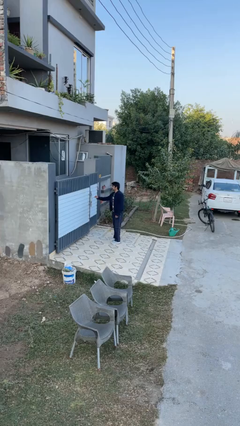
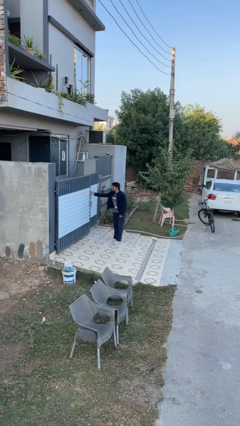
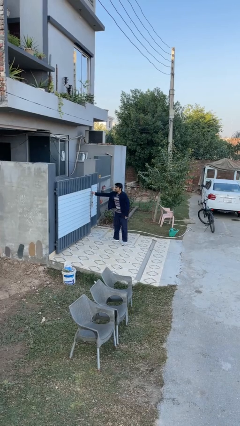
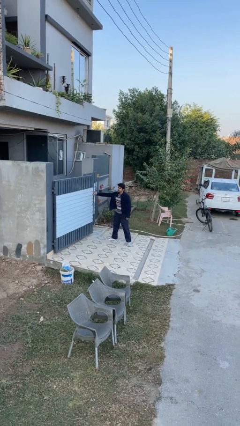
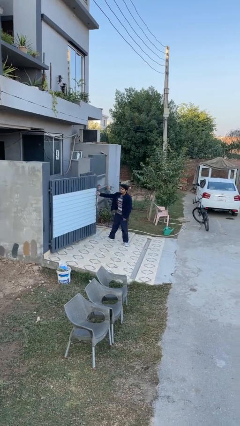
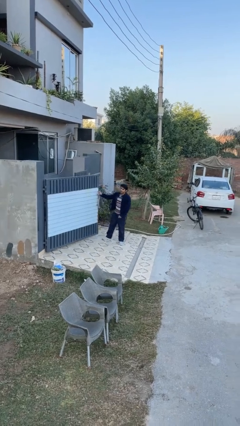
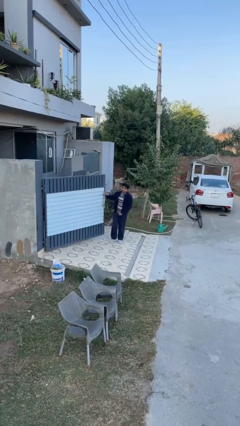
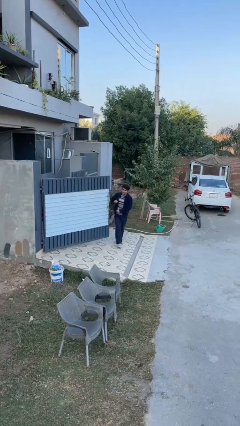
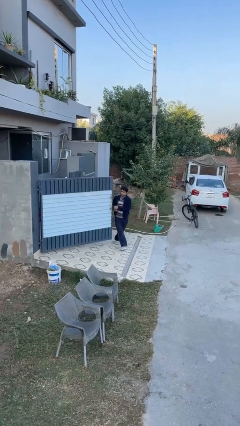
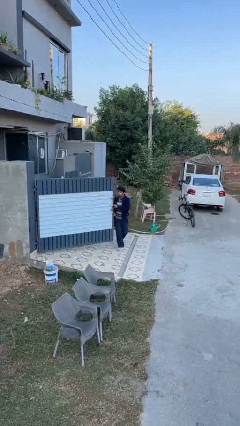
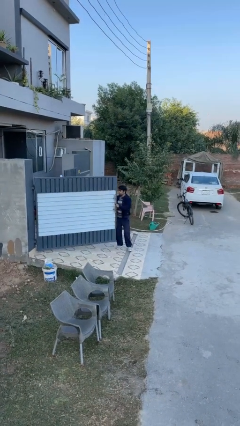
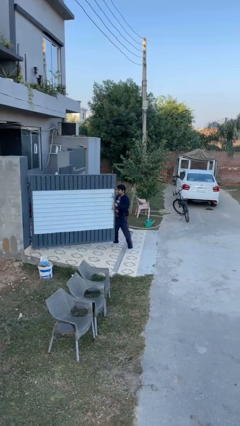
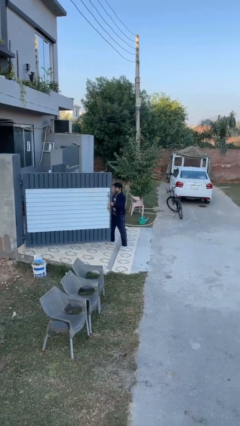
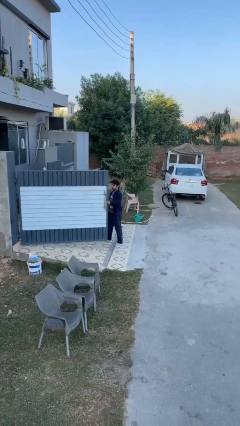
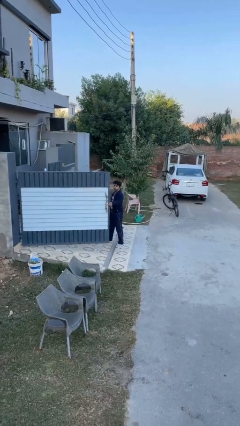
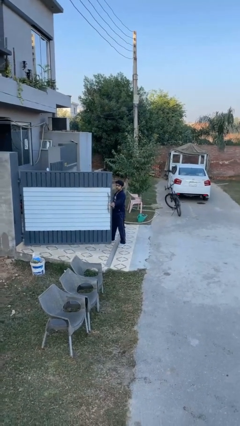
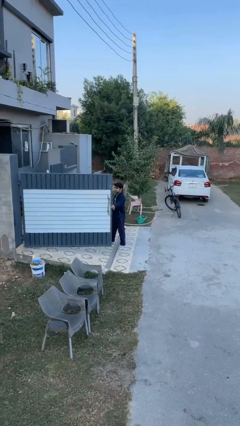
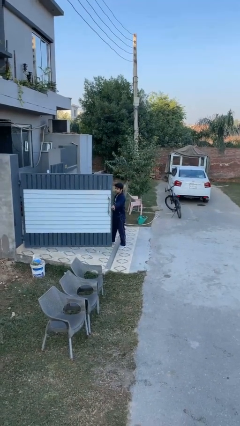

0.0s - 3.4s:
person opens facility door

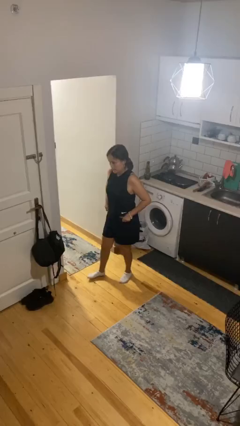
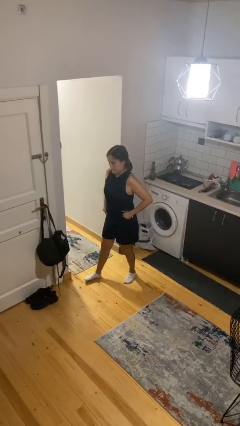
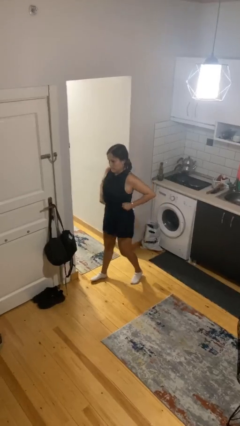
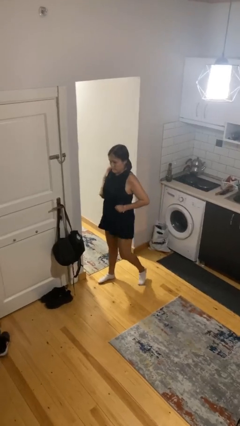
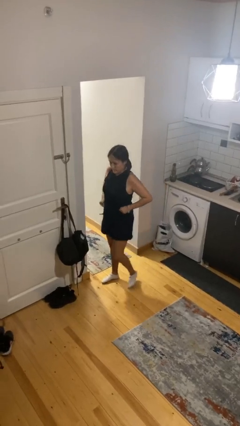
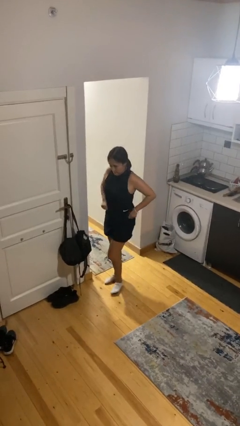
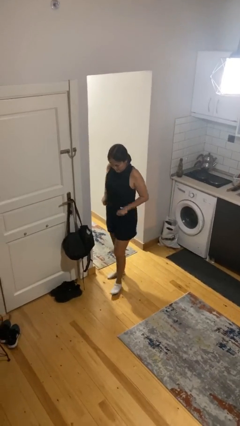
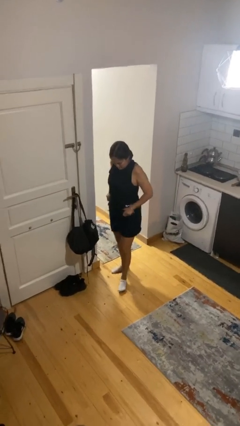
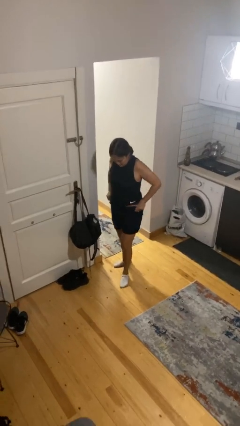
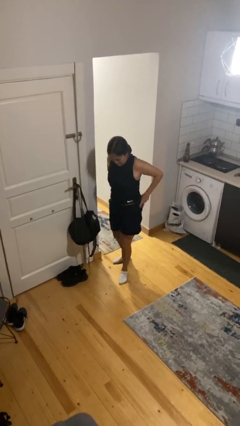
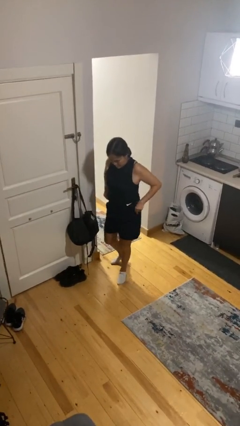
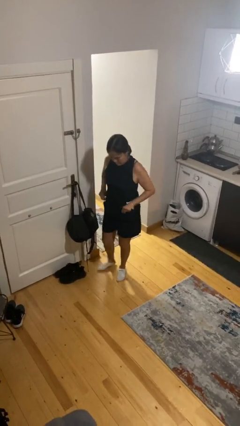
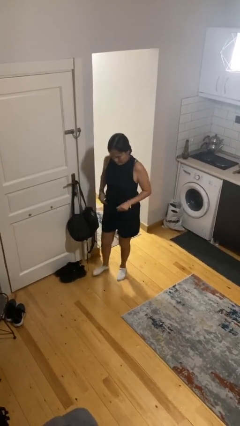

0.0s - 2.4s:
person hikes up pants

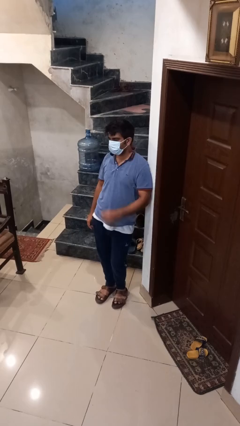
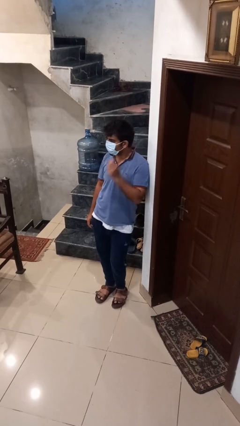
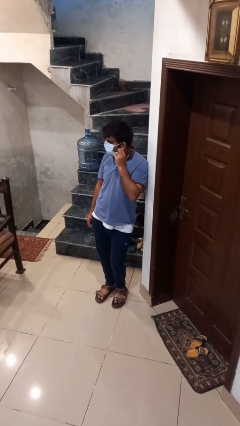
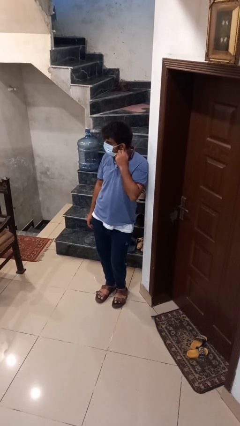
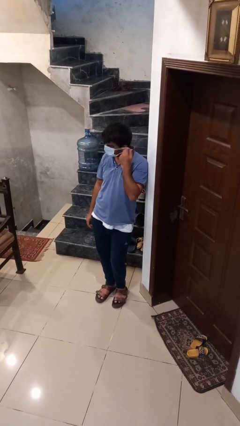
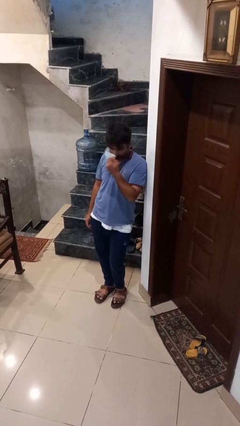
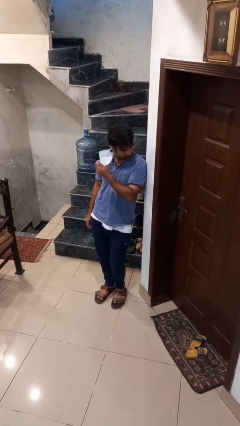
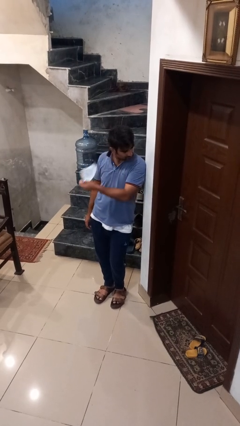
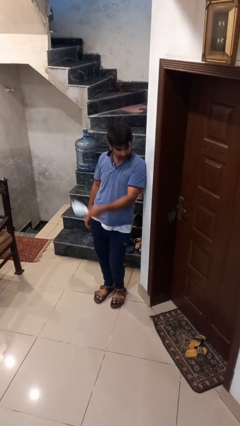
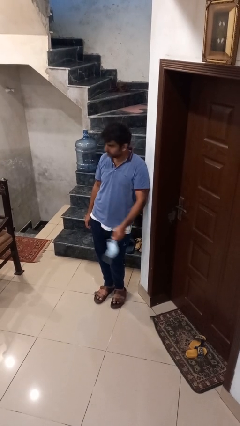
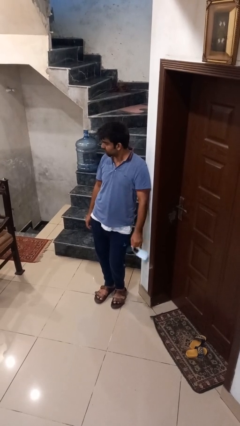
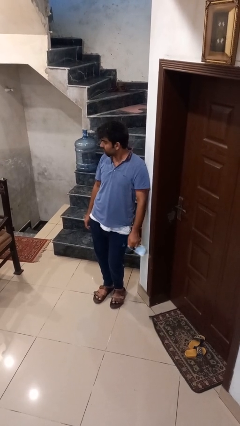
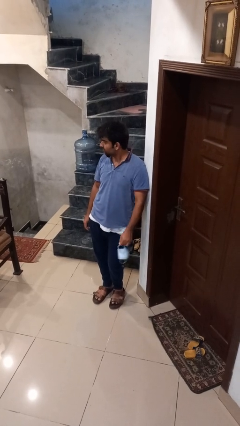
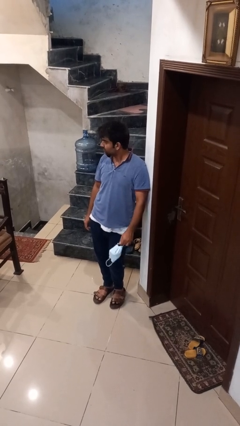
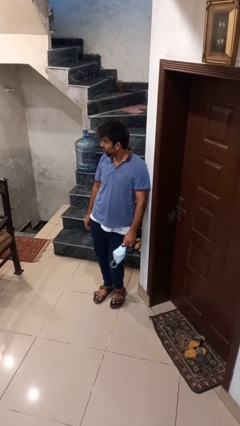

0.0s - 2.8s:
person takes off facemask

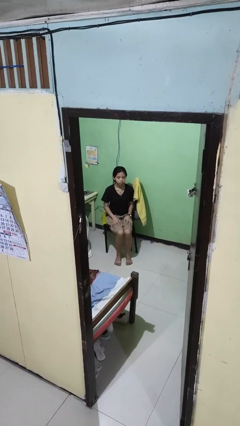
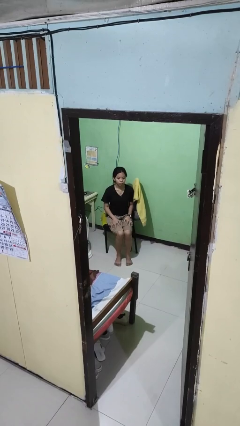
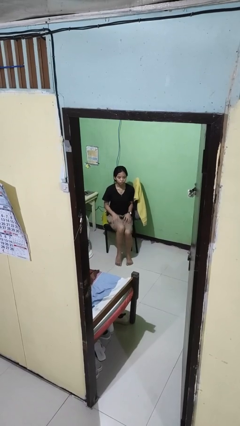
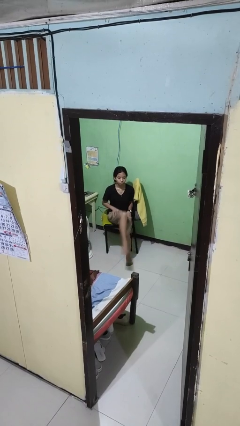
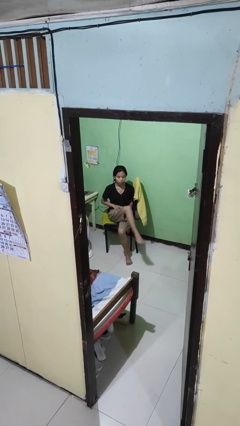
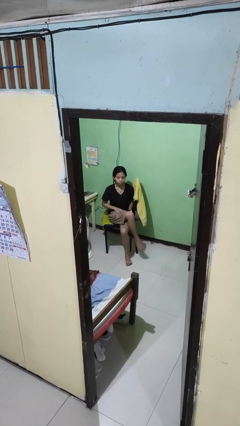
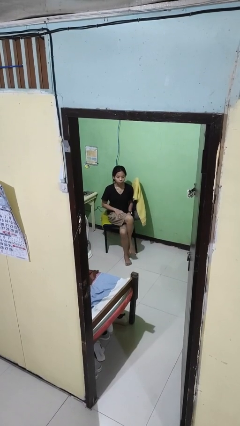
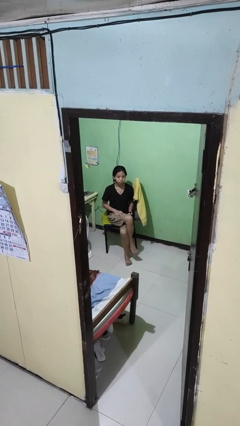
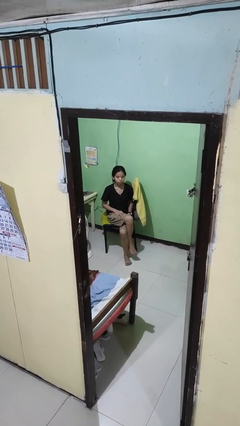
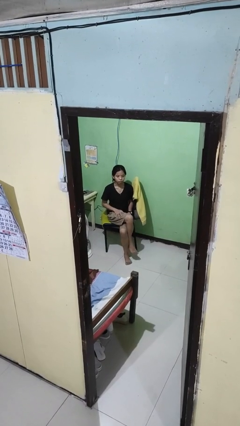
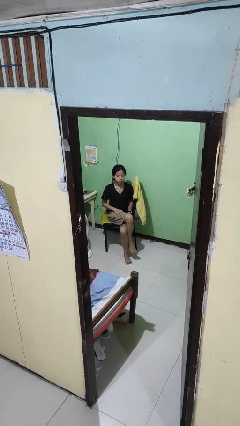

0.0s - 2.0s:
person crosses legs

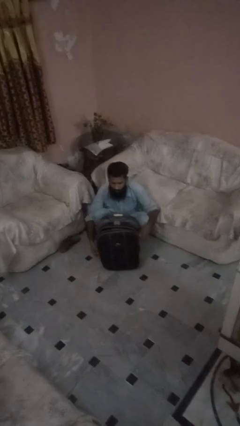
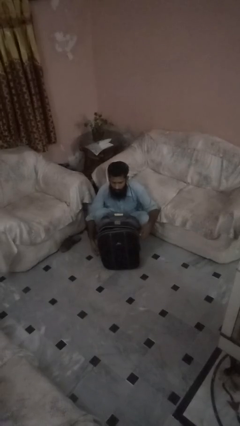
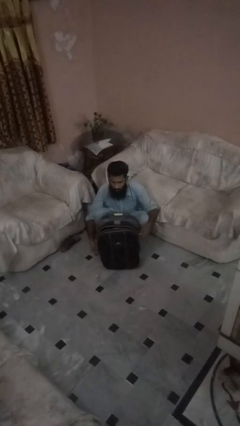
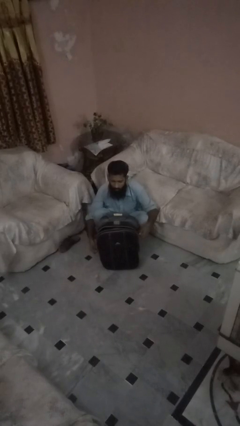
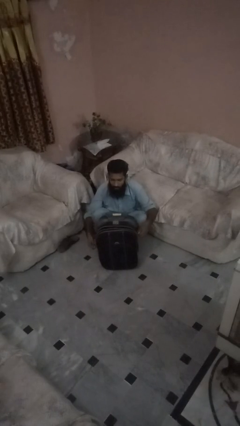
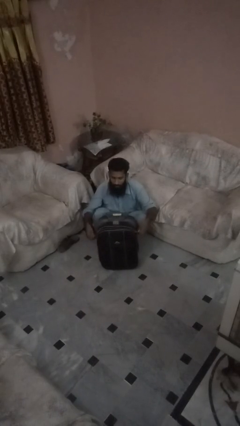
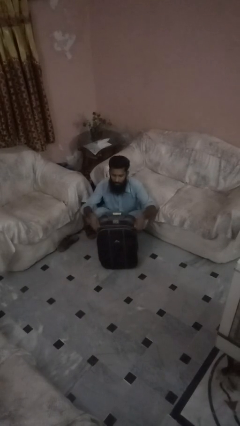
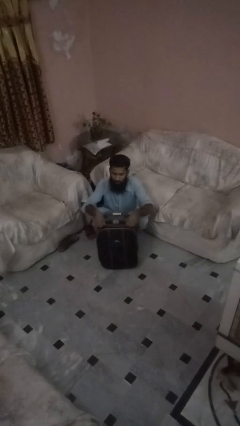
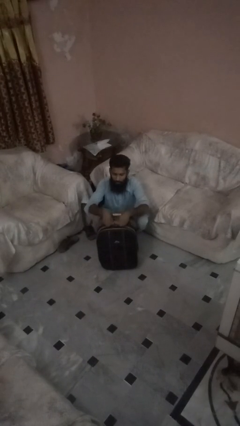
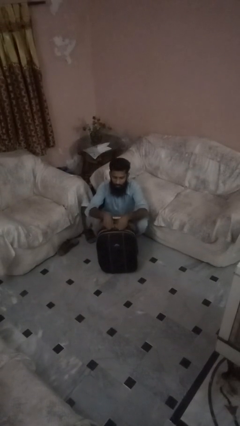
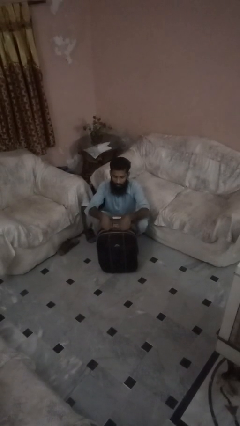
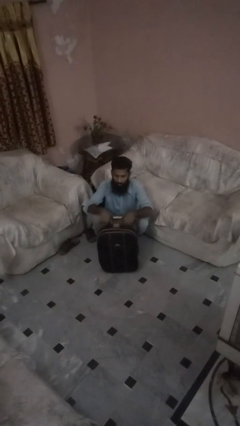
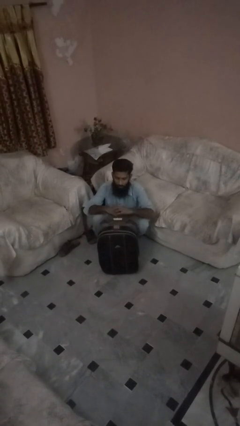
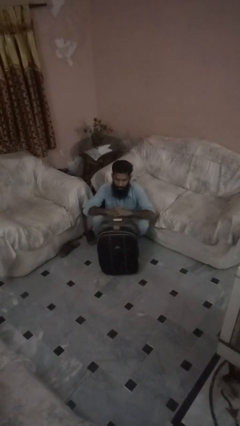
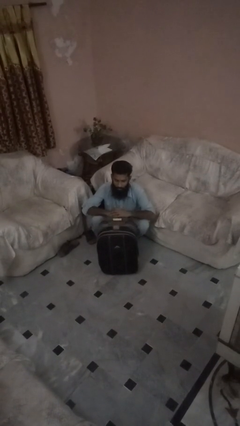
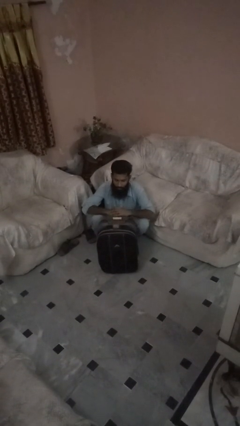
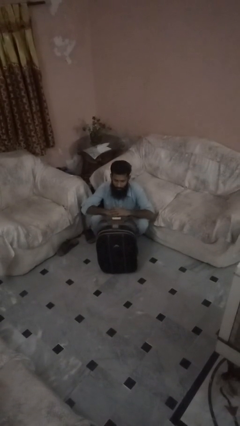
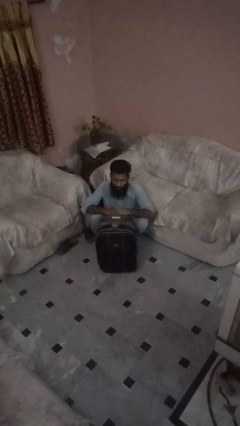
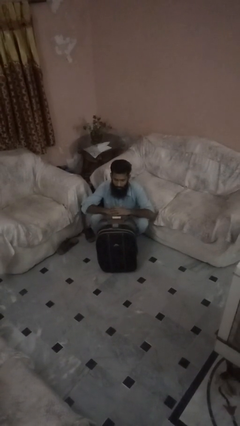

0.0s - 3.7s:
person closes suitcase

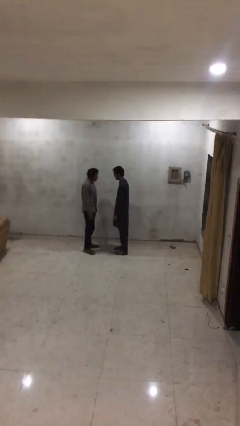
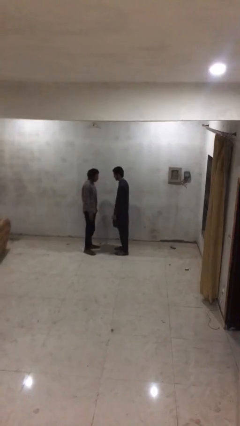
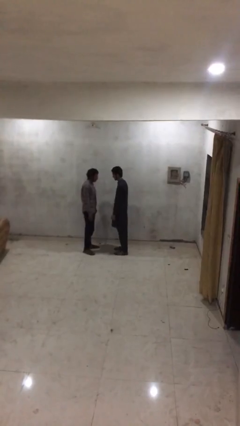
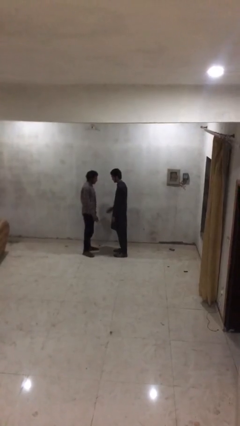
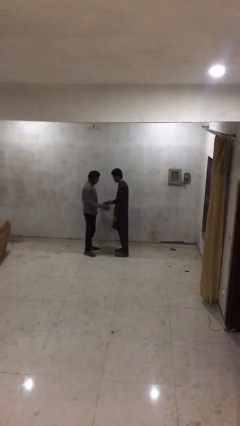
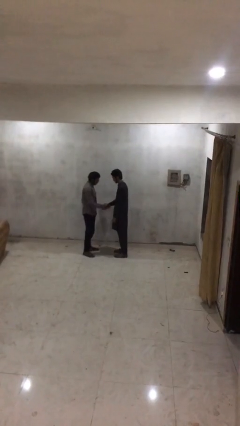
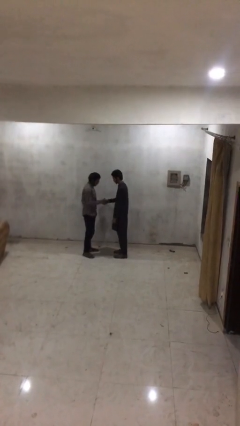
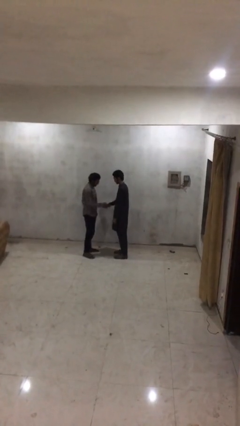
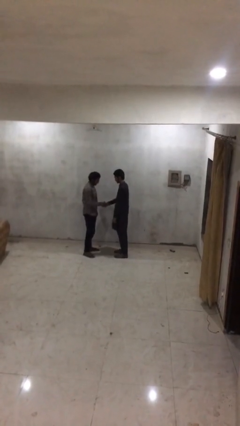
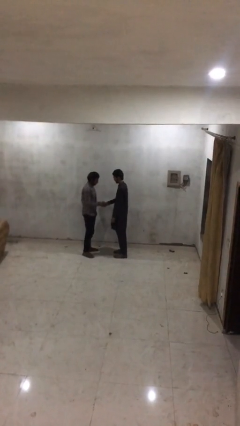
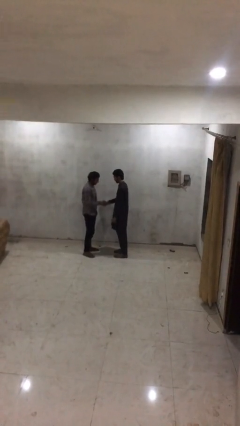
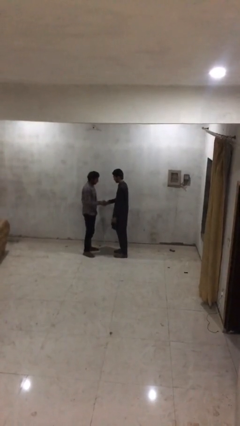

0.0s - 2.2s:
person shakes hand

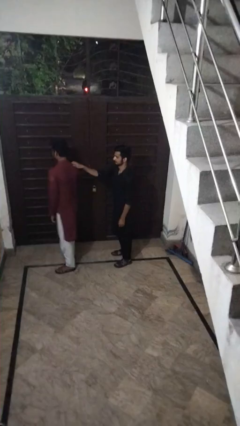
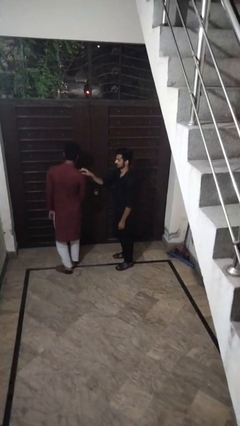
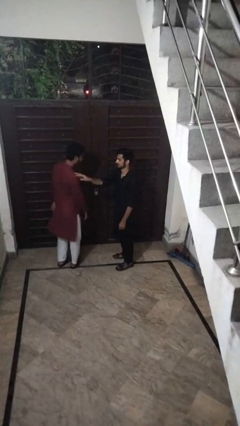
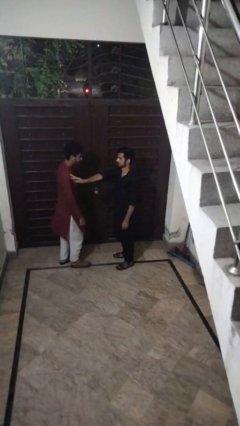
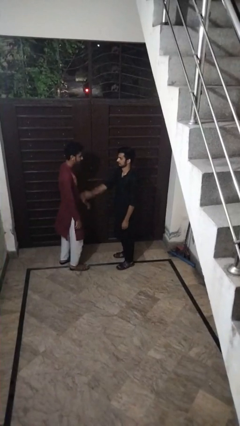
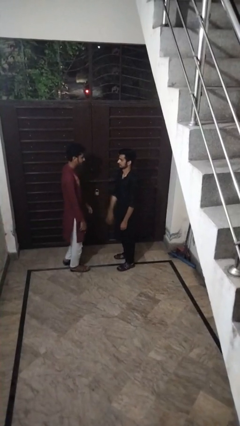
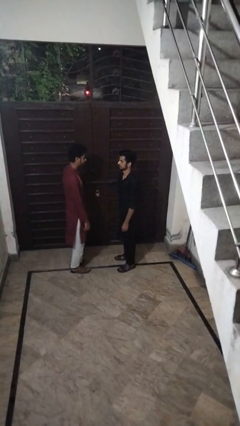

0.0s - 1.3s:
person spins person around
